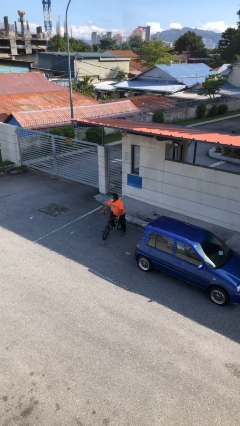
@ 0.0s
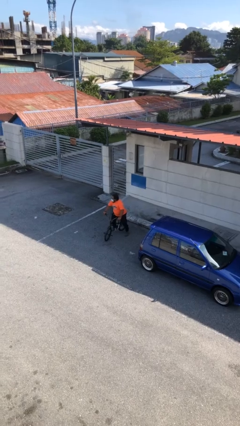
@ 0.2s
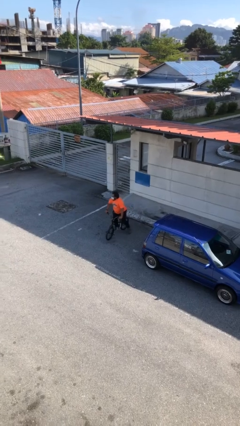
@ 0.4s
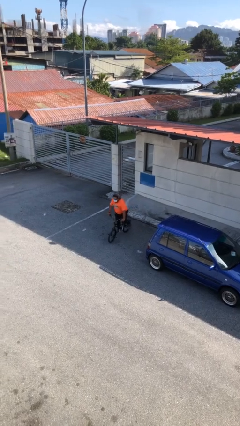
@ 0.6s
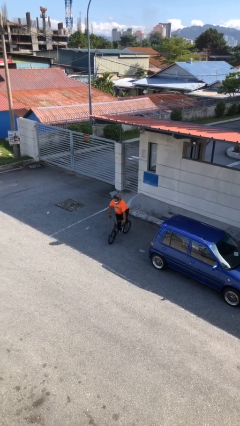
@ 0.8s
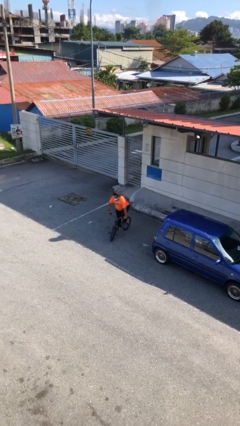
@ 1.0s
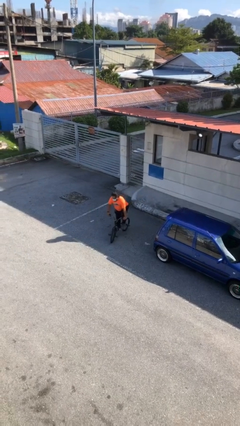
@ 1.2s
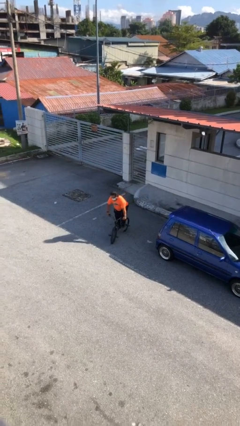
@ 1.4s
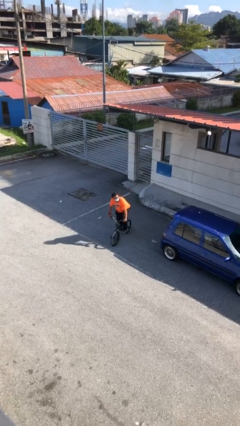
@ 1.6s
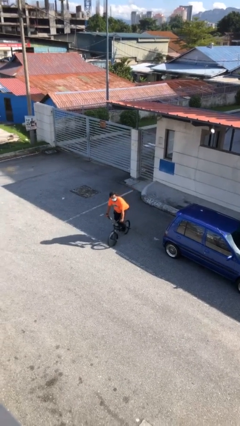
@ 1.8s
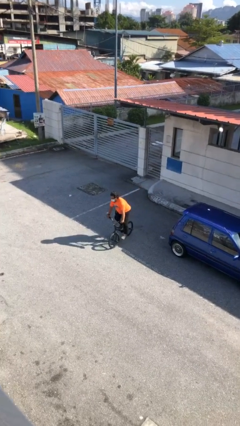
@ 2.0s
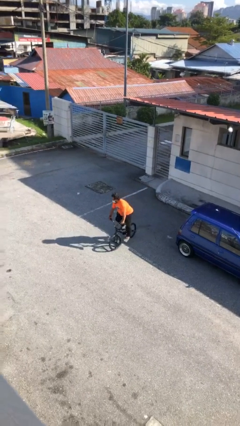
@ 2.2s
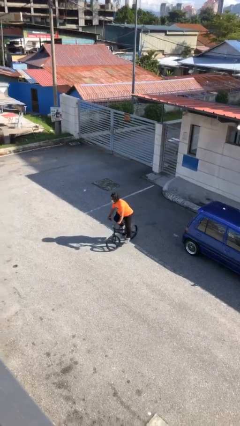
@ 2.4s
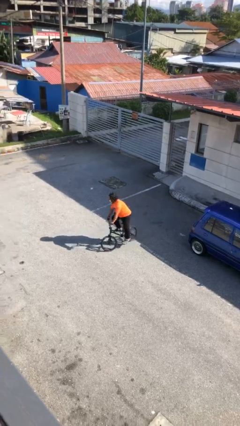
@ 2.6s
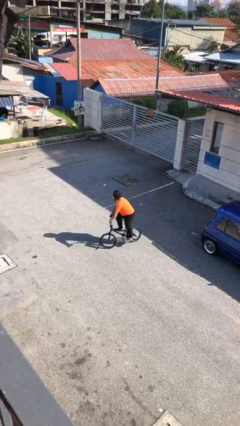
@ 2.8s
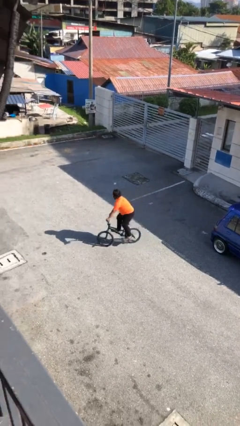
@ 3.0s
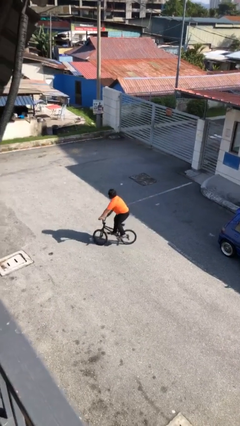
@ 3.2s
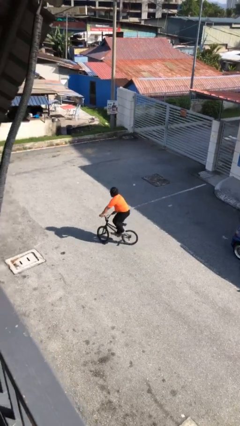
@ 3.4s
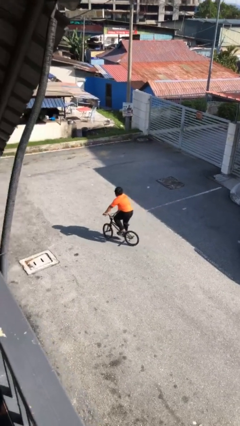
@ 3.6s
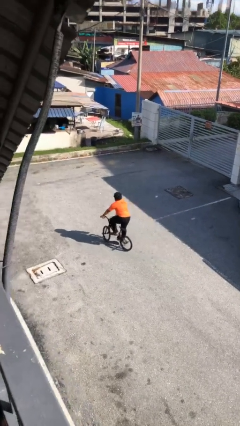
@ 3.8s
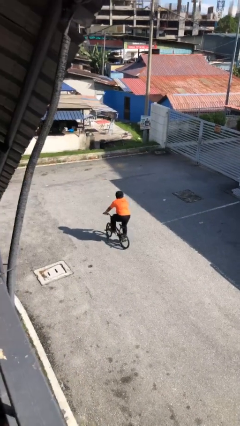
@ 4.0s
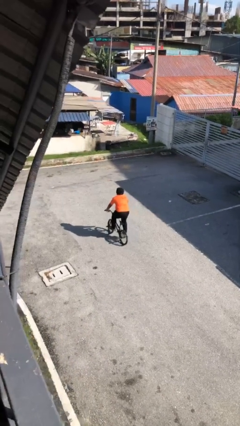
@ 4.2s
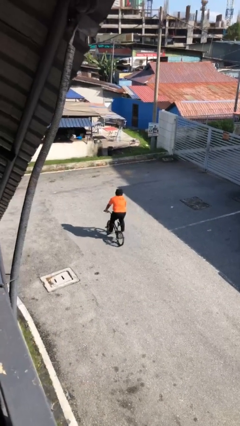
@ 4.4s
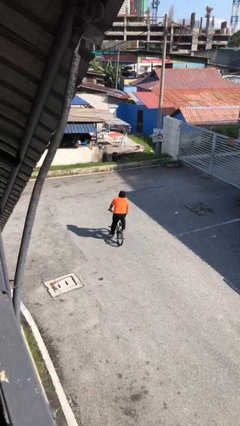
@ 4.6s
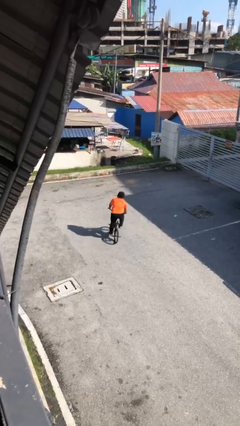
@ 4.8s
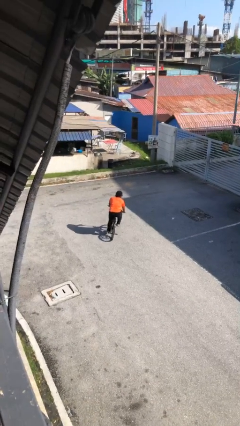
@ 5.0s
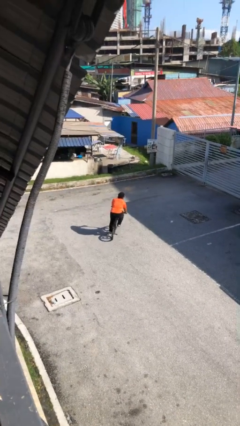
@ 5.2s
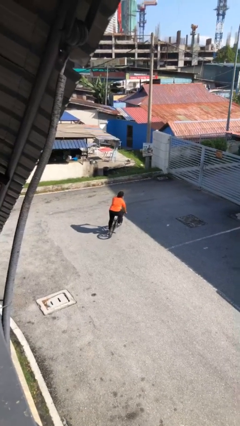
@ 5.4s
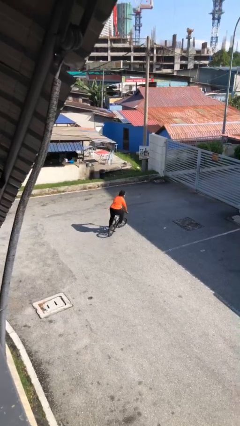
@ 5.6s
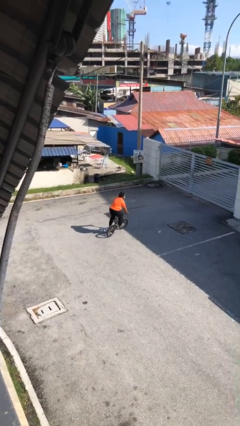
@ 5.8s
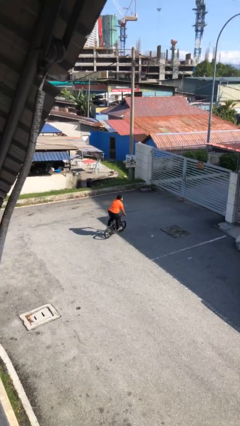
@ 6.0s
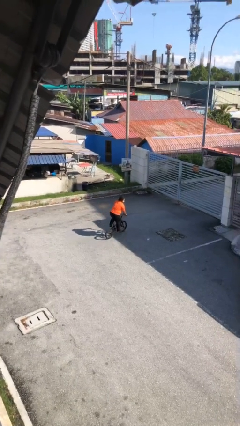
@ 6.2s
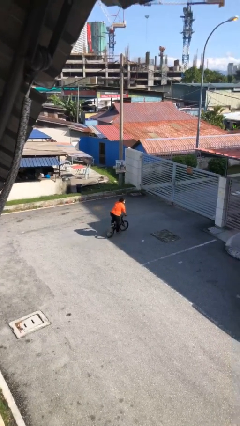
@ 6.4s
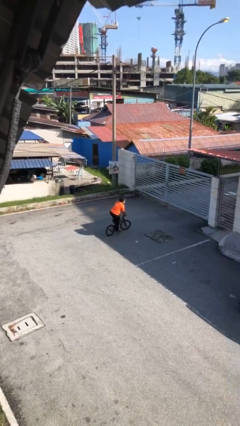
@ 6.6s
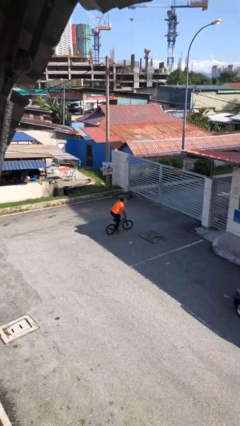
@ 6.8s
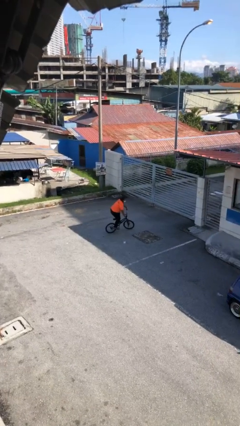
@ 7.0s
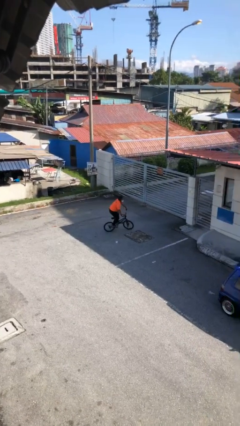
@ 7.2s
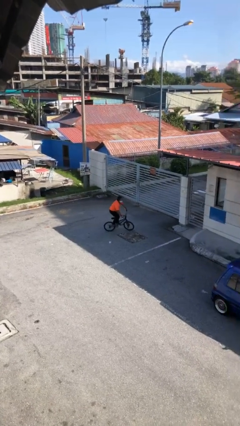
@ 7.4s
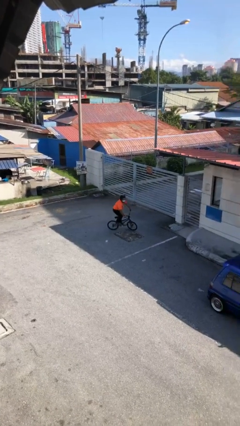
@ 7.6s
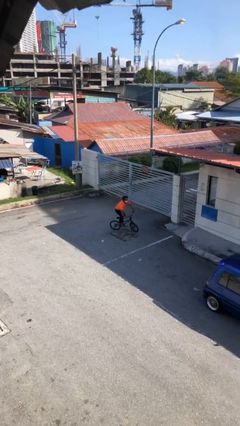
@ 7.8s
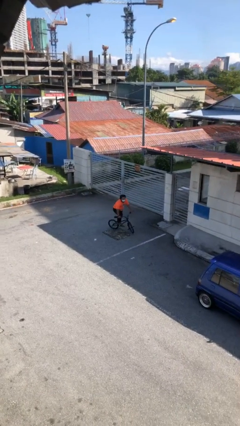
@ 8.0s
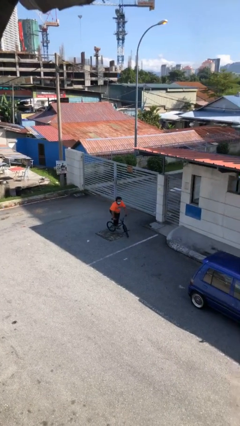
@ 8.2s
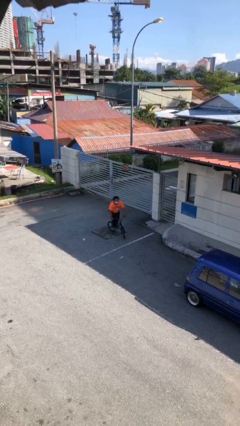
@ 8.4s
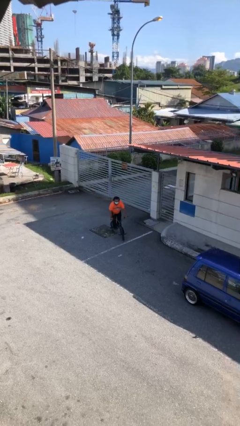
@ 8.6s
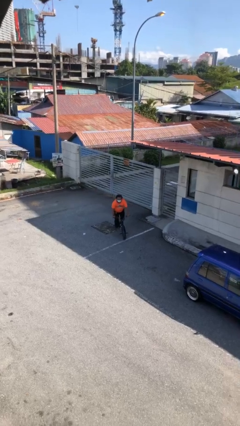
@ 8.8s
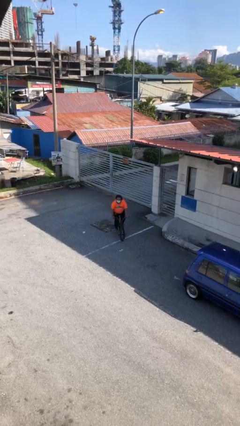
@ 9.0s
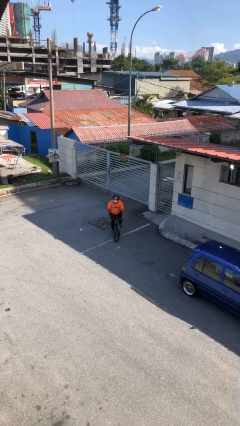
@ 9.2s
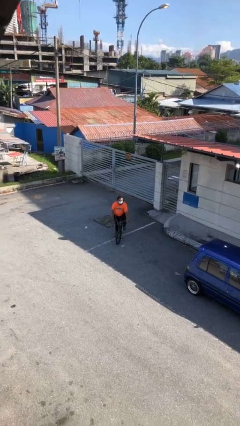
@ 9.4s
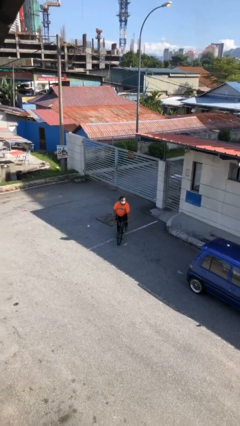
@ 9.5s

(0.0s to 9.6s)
person rides bicycle

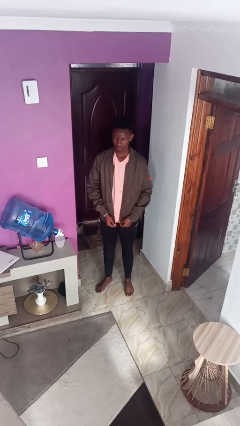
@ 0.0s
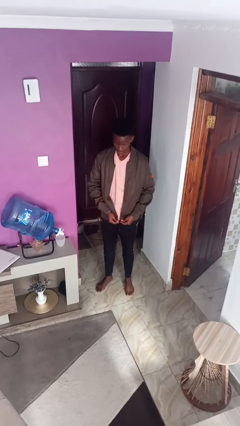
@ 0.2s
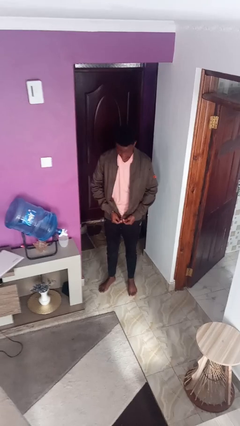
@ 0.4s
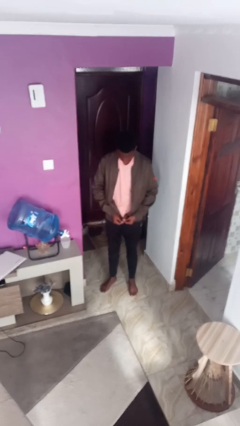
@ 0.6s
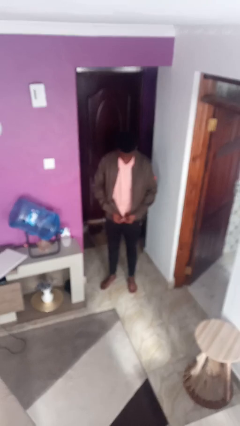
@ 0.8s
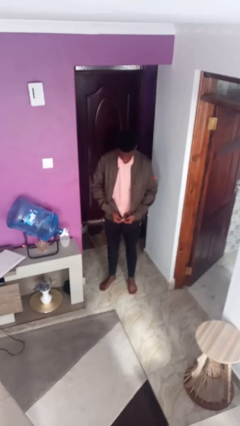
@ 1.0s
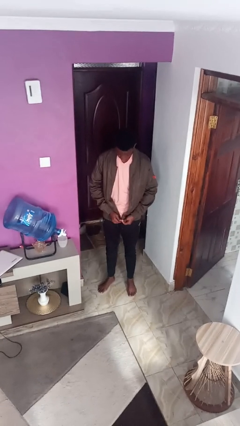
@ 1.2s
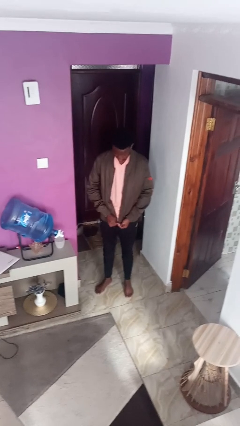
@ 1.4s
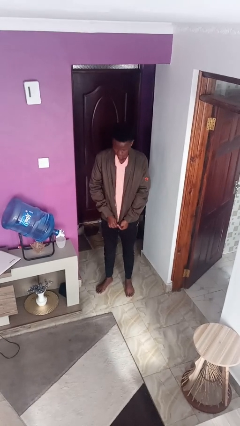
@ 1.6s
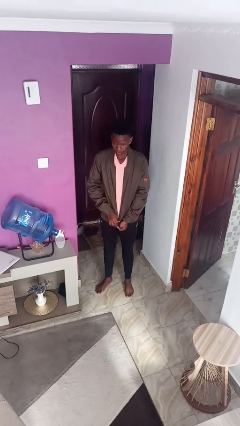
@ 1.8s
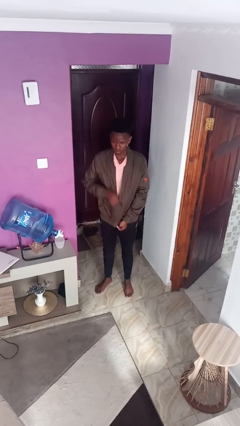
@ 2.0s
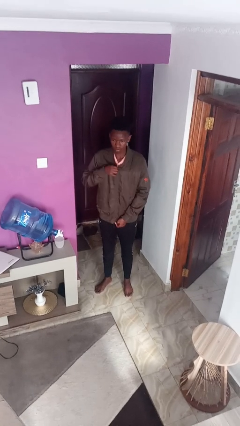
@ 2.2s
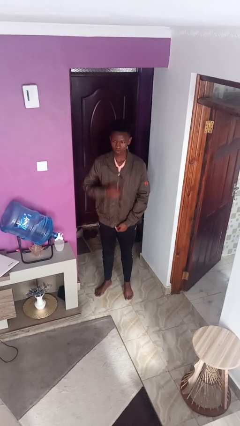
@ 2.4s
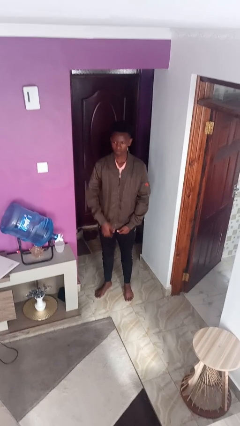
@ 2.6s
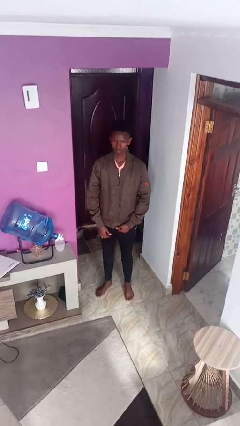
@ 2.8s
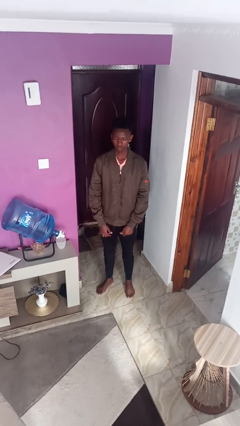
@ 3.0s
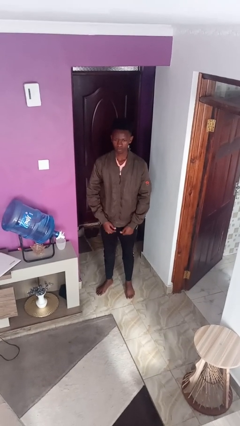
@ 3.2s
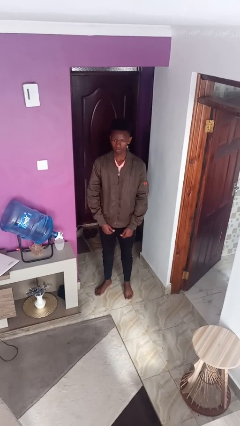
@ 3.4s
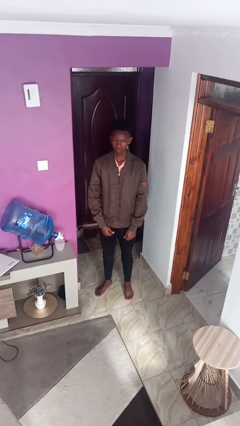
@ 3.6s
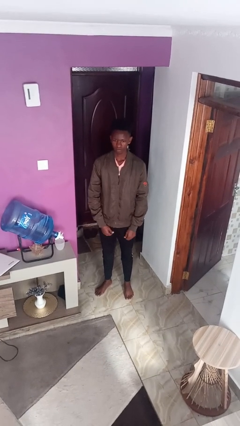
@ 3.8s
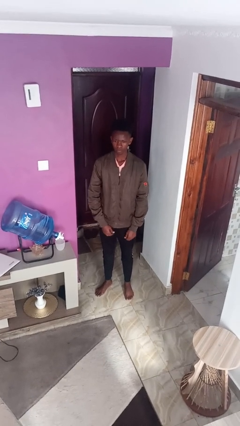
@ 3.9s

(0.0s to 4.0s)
person zips up jacket

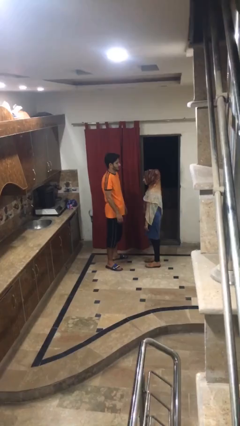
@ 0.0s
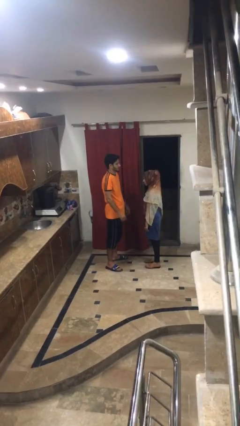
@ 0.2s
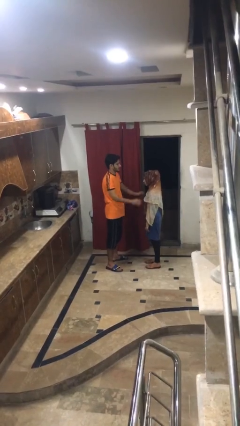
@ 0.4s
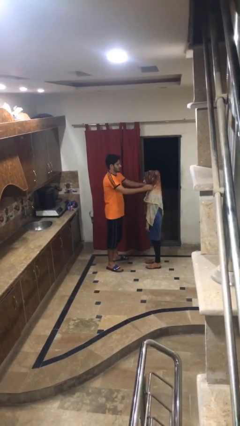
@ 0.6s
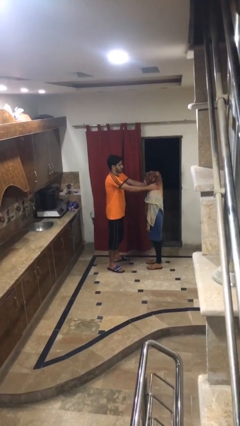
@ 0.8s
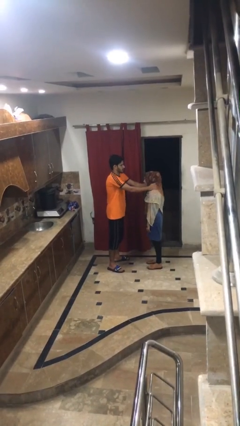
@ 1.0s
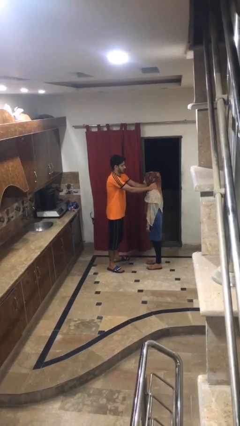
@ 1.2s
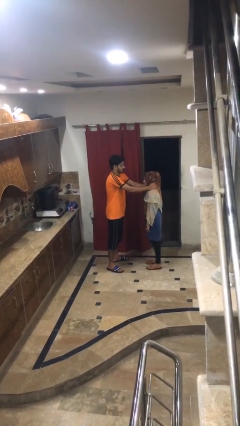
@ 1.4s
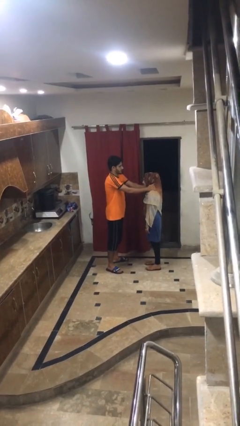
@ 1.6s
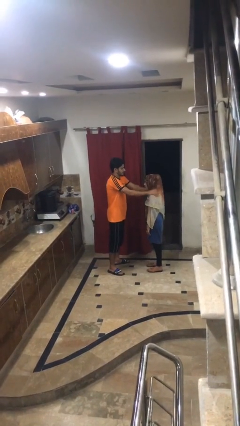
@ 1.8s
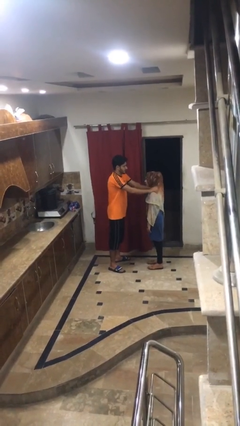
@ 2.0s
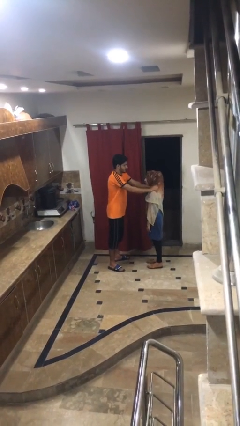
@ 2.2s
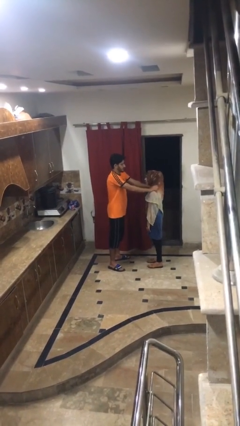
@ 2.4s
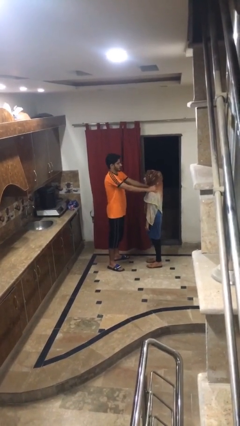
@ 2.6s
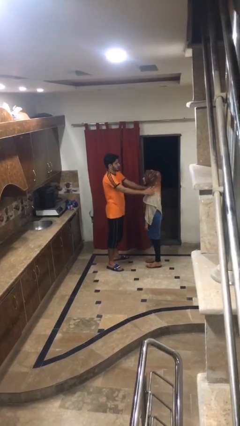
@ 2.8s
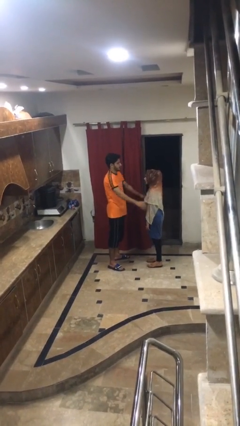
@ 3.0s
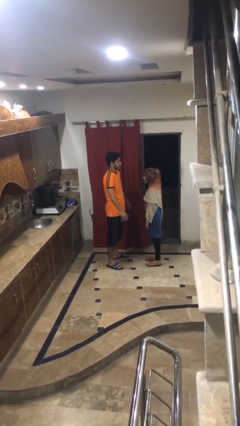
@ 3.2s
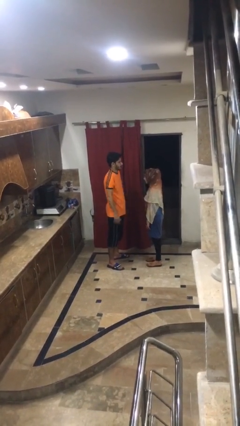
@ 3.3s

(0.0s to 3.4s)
person pounds shoulders of person

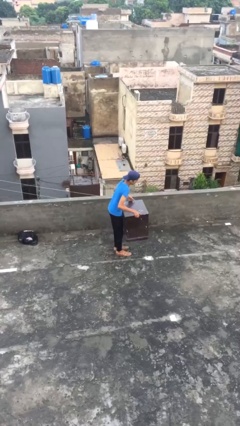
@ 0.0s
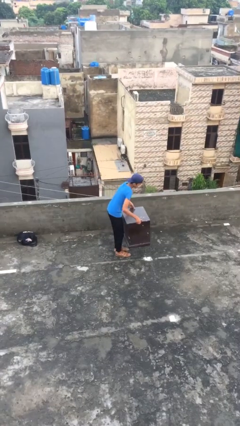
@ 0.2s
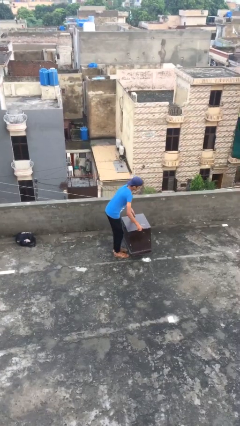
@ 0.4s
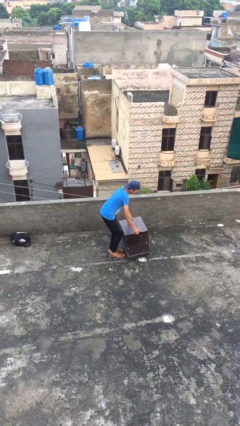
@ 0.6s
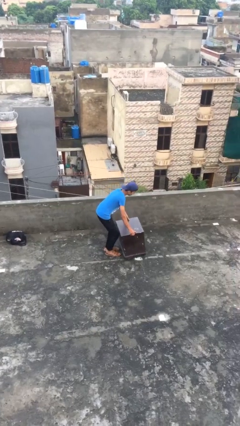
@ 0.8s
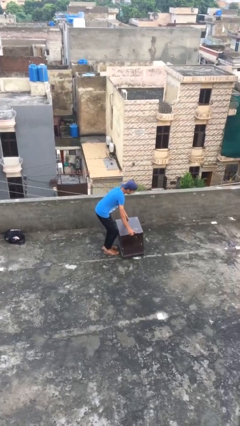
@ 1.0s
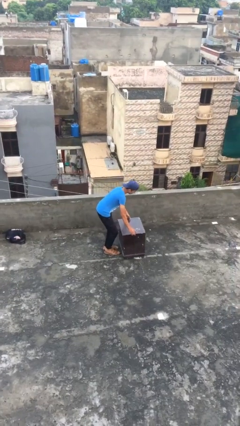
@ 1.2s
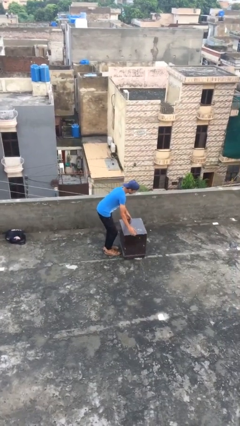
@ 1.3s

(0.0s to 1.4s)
person puts down object on floor
